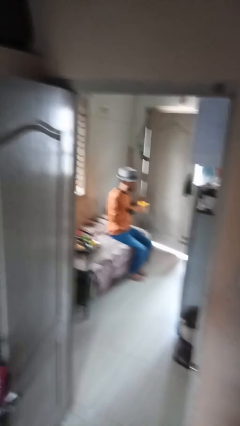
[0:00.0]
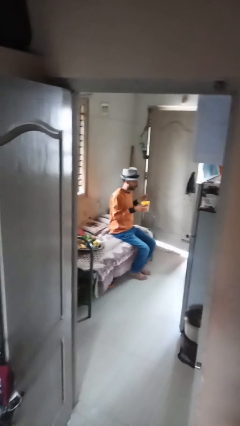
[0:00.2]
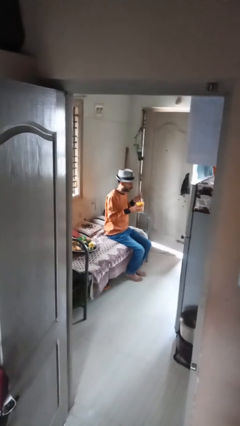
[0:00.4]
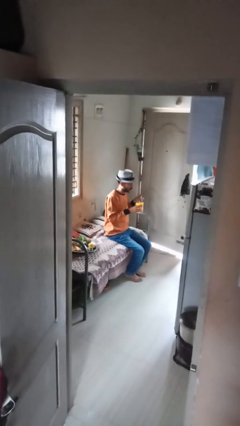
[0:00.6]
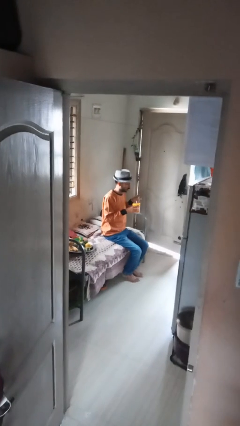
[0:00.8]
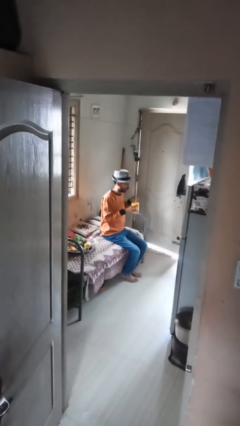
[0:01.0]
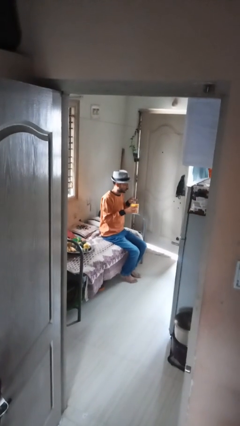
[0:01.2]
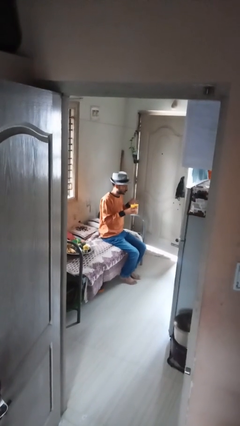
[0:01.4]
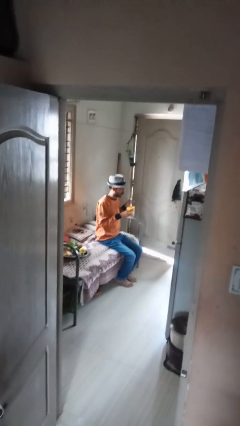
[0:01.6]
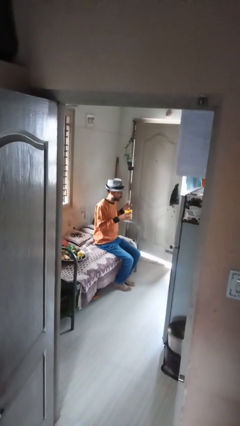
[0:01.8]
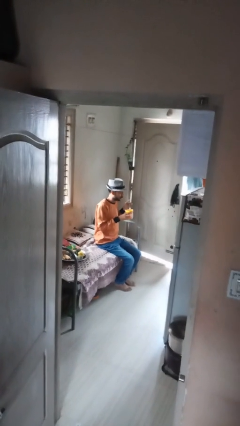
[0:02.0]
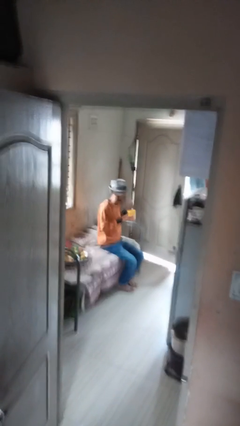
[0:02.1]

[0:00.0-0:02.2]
person stirs mug

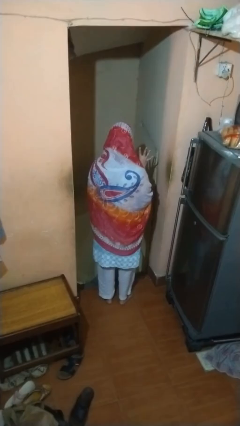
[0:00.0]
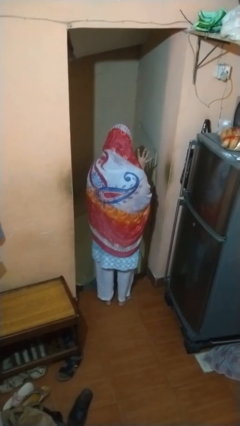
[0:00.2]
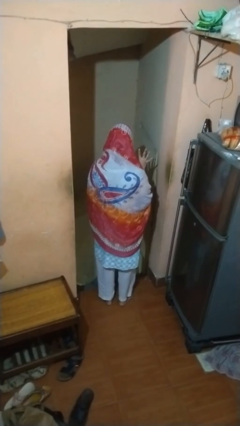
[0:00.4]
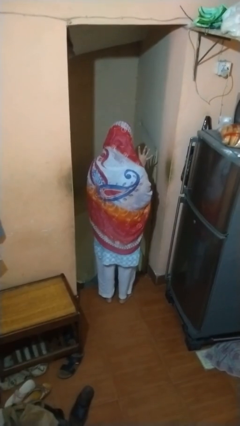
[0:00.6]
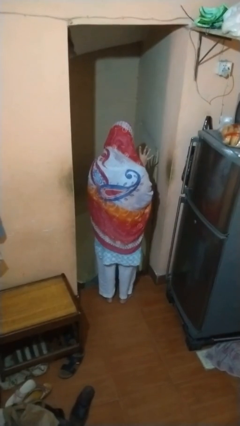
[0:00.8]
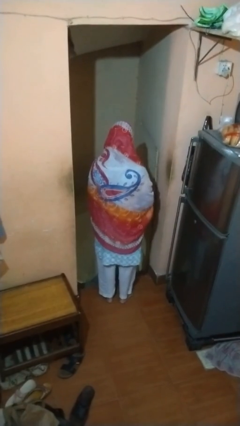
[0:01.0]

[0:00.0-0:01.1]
person gestures number four

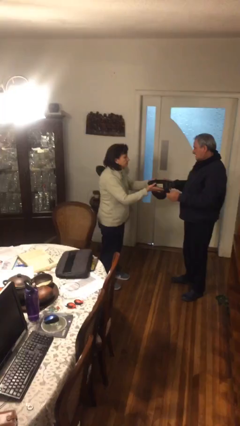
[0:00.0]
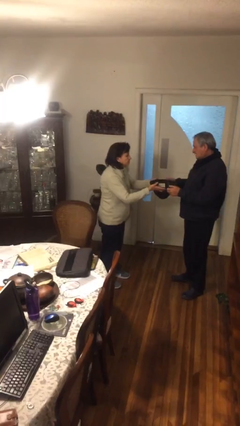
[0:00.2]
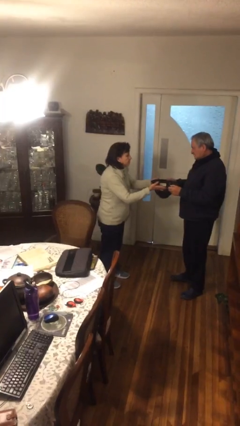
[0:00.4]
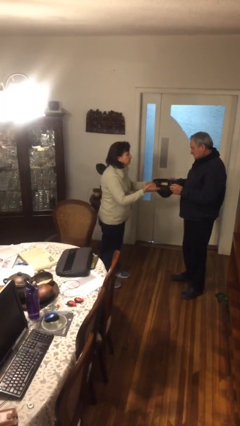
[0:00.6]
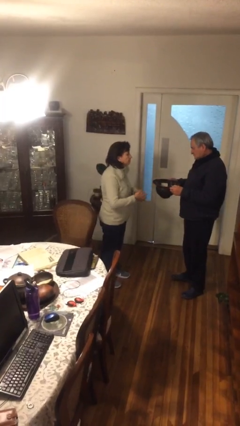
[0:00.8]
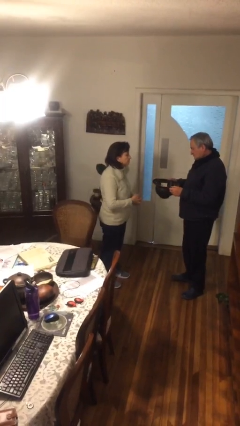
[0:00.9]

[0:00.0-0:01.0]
person transfers object to person

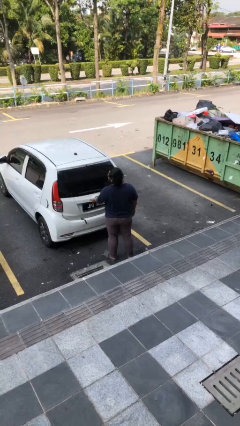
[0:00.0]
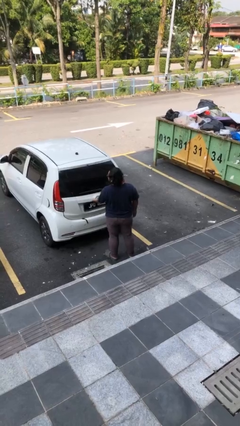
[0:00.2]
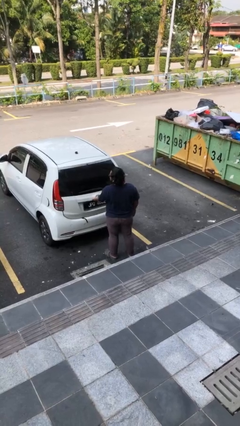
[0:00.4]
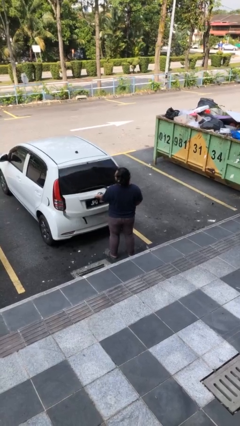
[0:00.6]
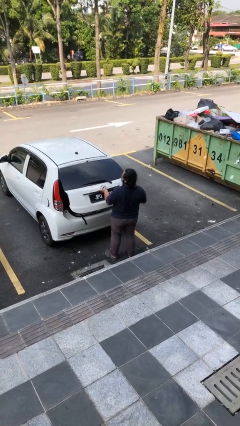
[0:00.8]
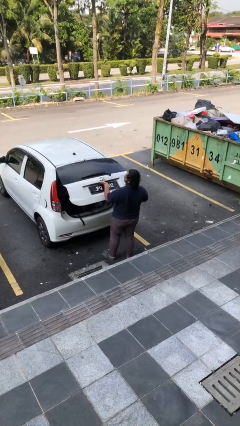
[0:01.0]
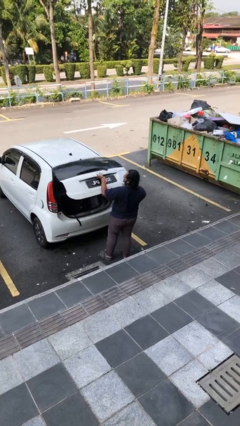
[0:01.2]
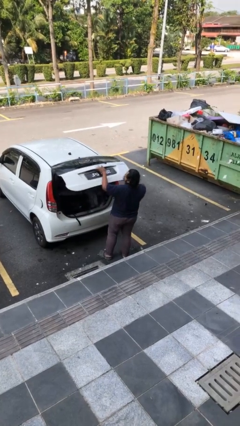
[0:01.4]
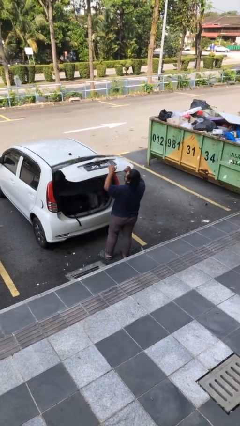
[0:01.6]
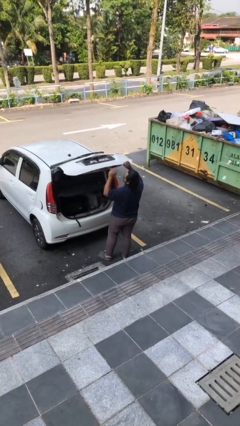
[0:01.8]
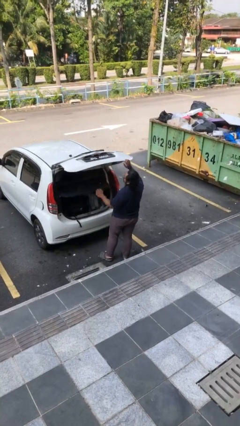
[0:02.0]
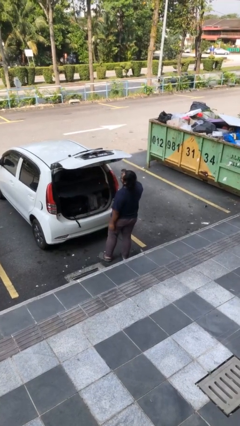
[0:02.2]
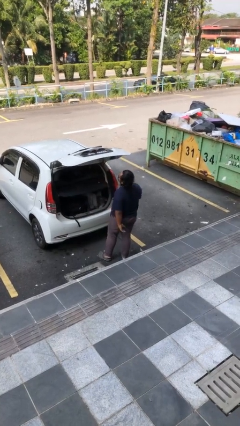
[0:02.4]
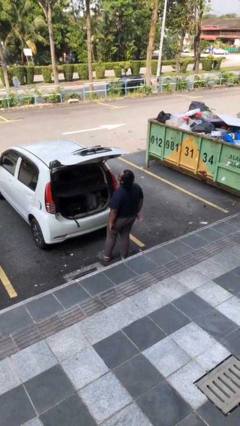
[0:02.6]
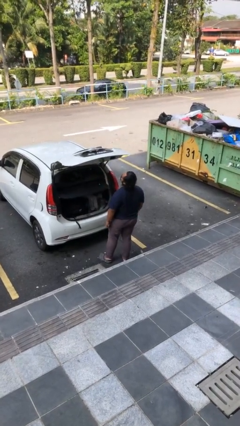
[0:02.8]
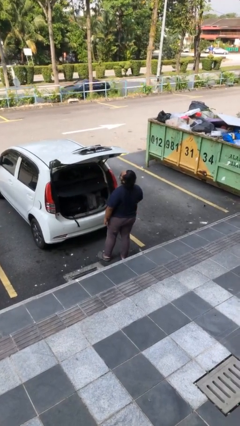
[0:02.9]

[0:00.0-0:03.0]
person opens car trunk

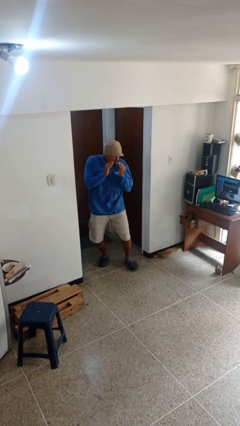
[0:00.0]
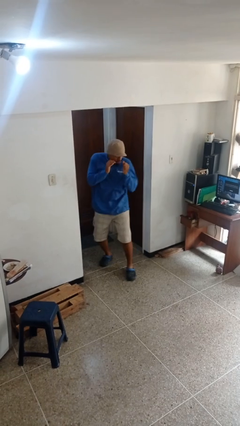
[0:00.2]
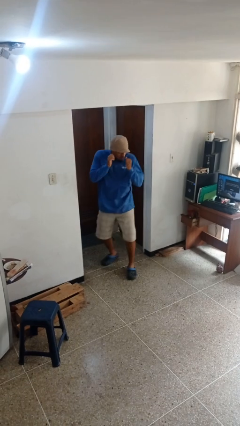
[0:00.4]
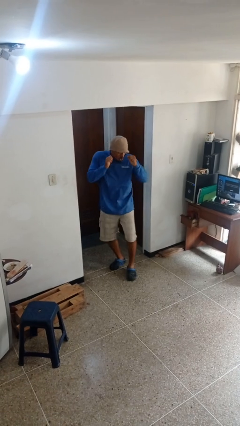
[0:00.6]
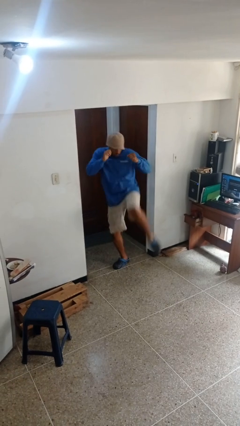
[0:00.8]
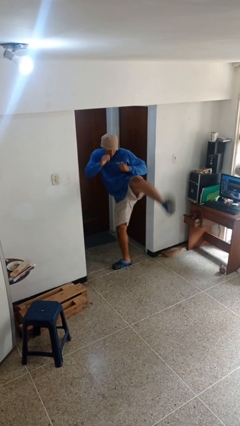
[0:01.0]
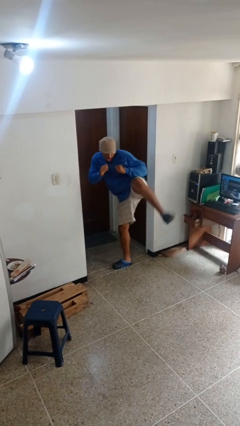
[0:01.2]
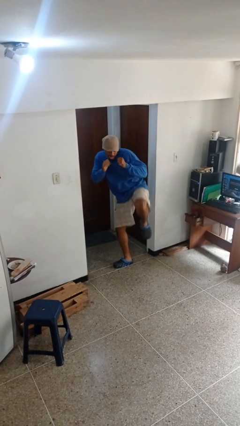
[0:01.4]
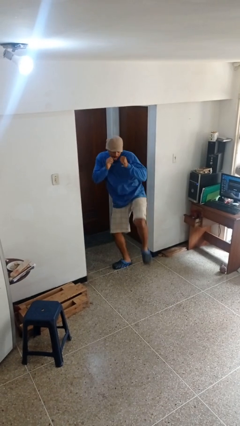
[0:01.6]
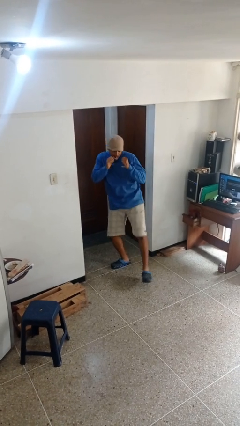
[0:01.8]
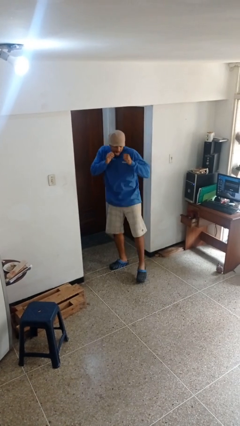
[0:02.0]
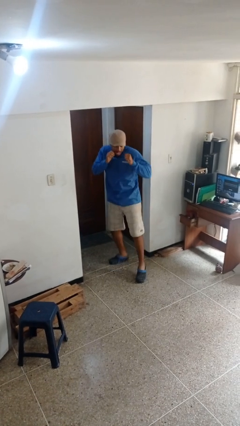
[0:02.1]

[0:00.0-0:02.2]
person karate kicks

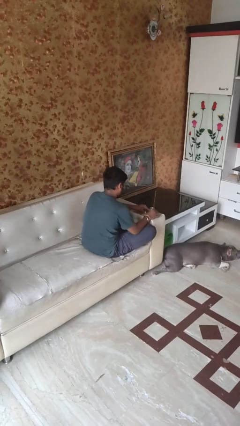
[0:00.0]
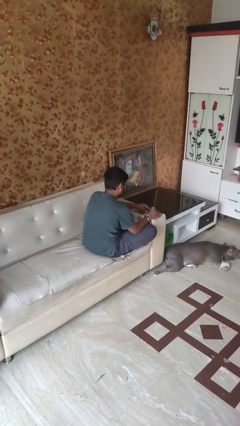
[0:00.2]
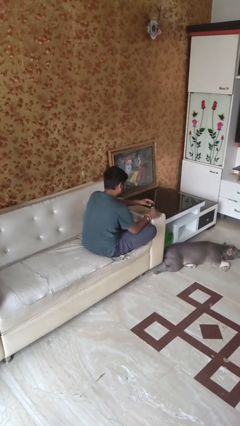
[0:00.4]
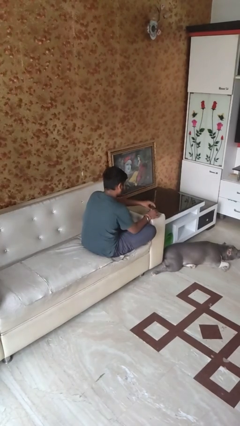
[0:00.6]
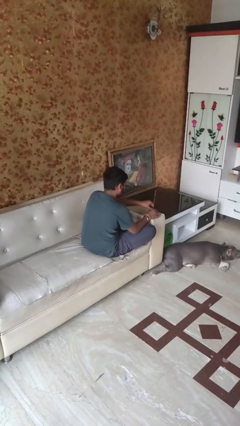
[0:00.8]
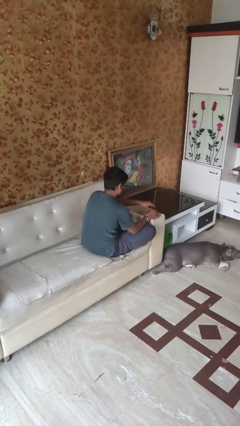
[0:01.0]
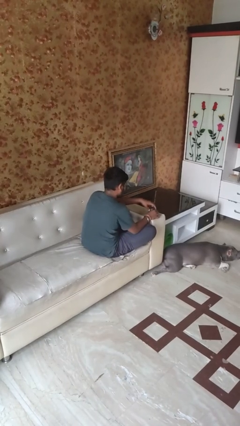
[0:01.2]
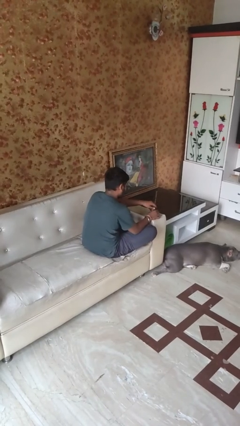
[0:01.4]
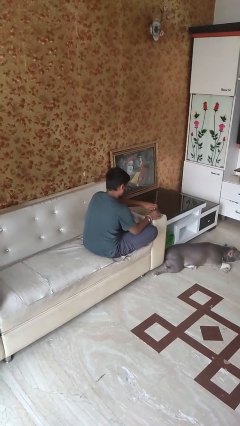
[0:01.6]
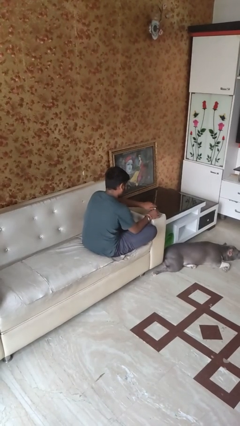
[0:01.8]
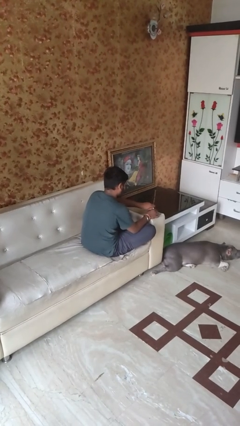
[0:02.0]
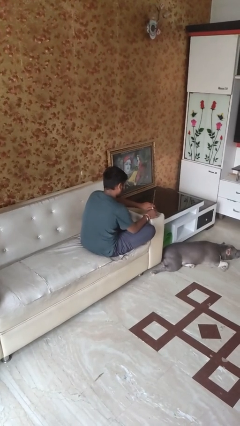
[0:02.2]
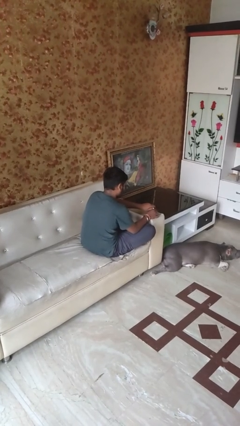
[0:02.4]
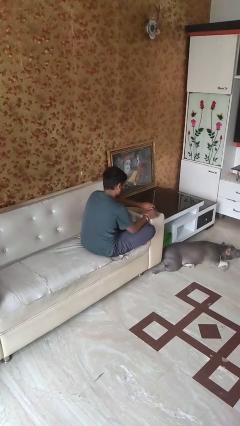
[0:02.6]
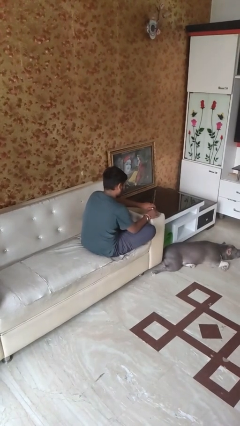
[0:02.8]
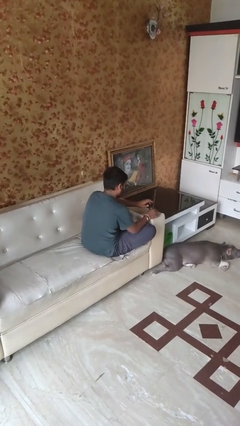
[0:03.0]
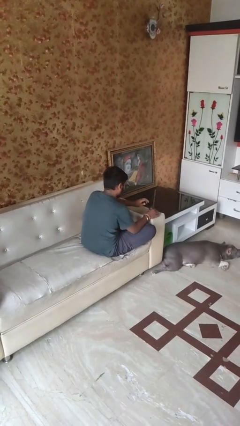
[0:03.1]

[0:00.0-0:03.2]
person closes jar

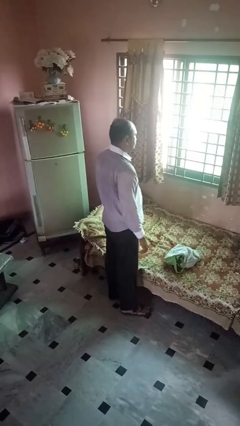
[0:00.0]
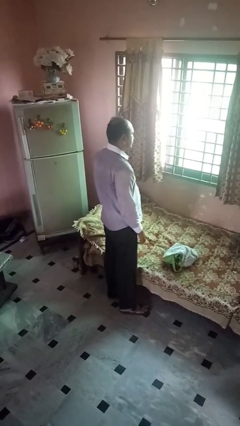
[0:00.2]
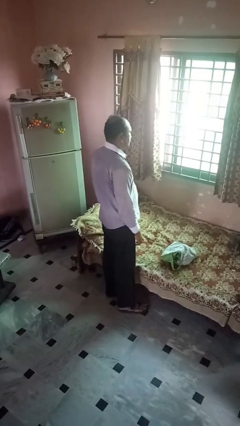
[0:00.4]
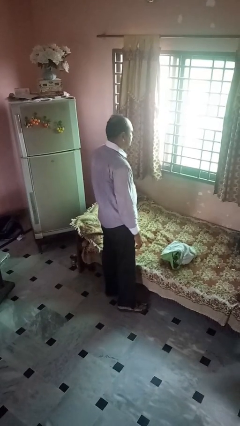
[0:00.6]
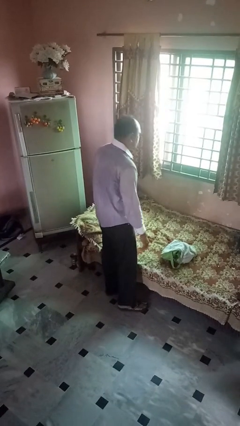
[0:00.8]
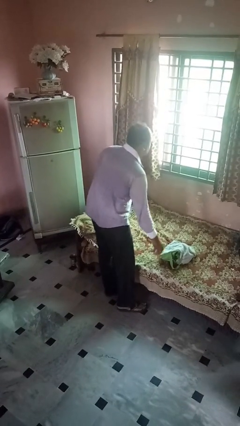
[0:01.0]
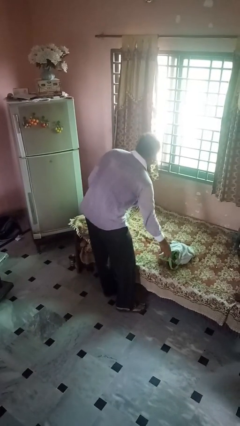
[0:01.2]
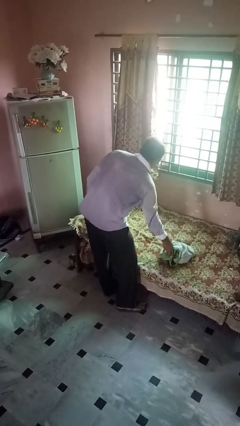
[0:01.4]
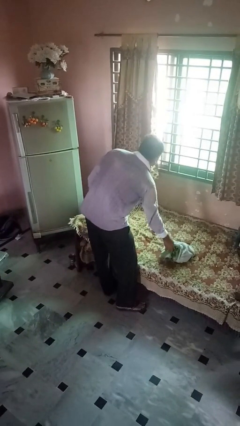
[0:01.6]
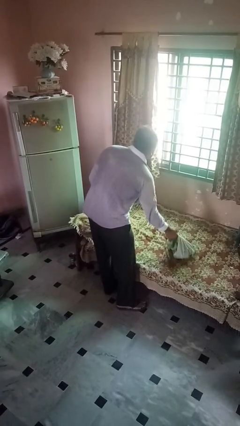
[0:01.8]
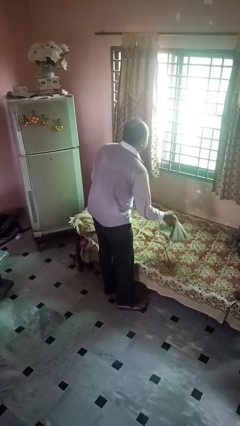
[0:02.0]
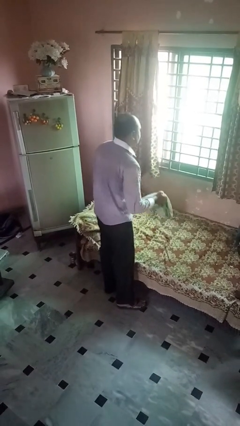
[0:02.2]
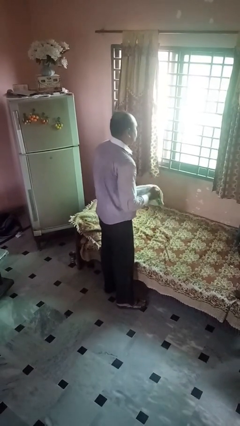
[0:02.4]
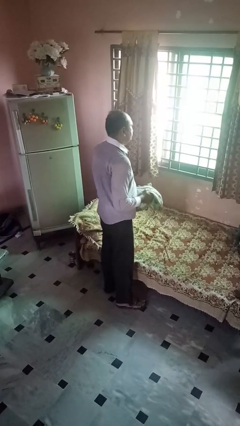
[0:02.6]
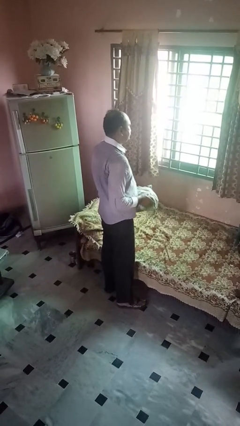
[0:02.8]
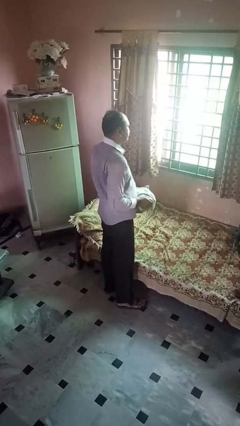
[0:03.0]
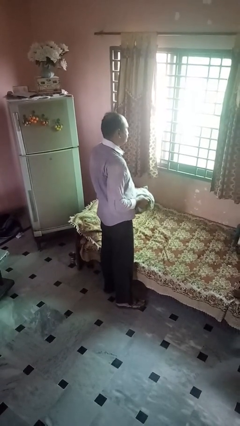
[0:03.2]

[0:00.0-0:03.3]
person picks up object from bed

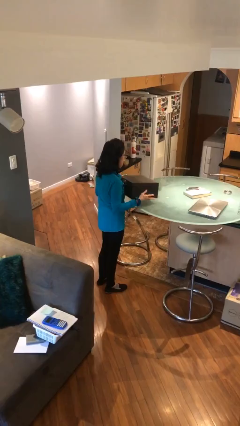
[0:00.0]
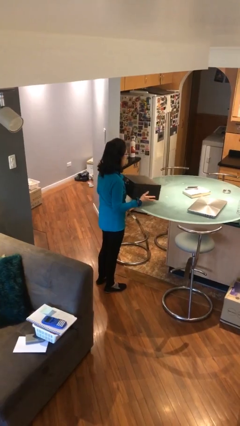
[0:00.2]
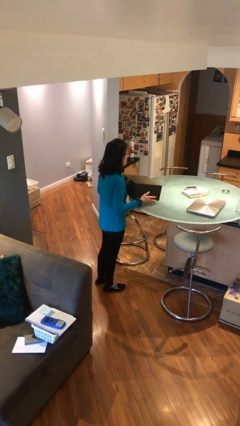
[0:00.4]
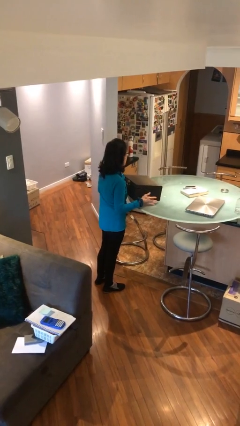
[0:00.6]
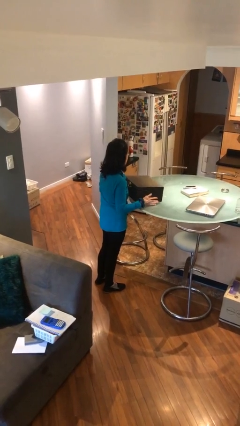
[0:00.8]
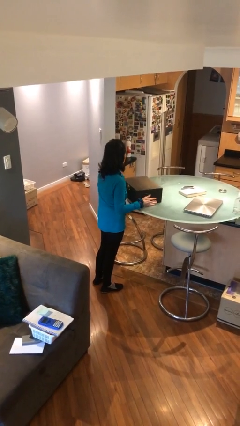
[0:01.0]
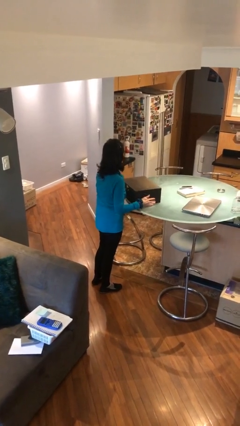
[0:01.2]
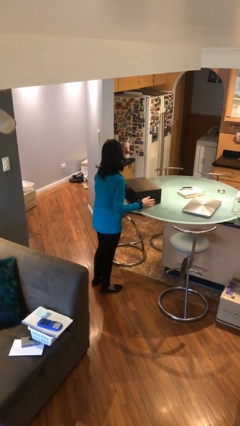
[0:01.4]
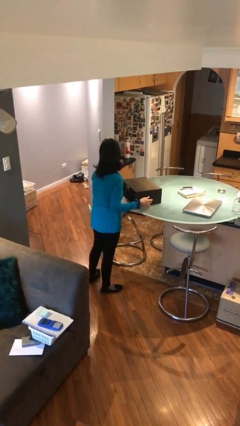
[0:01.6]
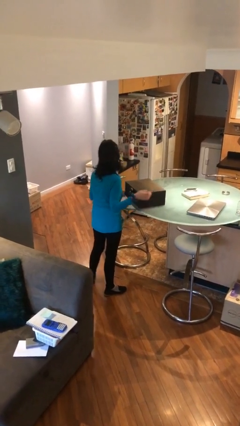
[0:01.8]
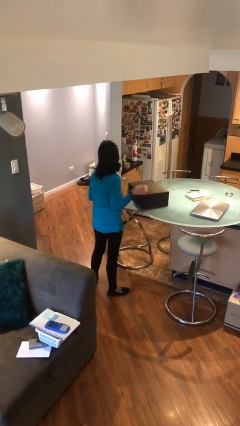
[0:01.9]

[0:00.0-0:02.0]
person puts down object on table
